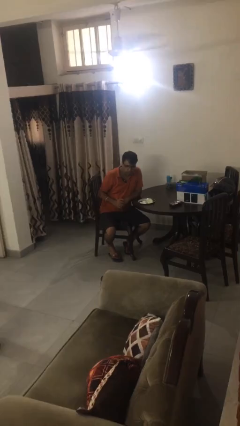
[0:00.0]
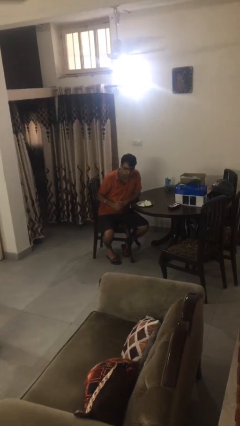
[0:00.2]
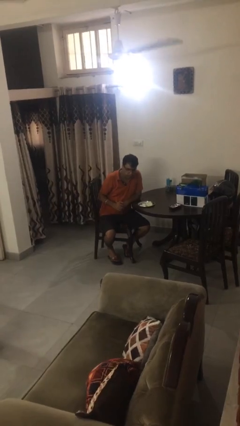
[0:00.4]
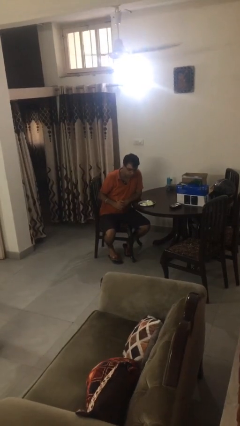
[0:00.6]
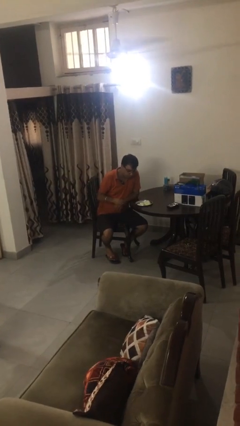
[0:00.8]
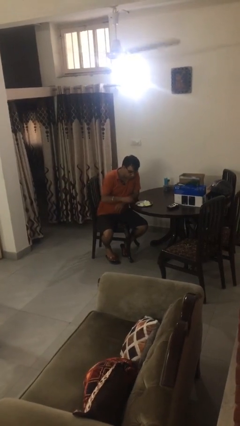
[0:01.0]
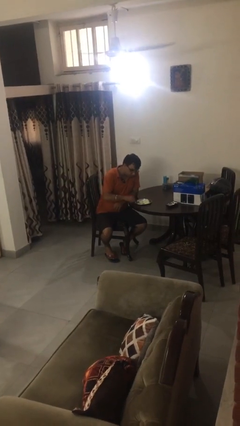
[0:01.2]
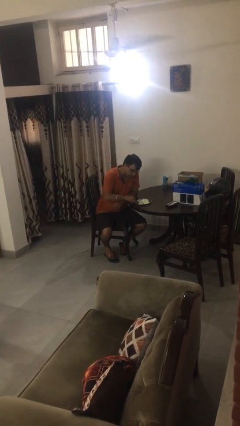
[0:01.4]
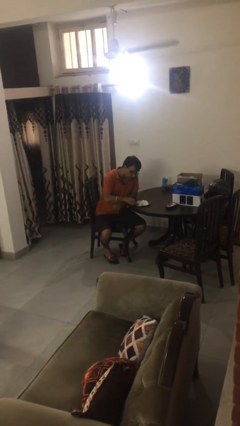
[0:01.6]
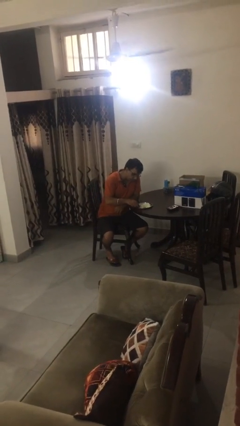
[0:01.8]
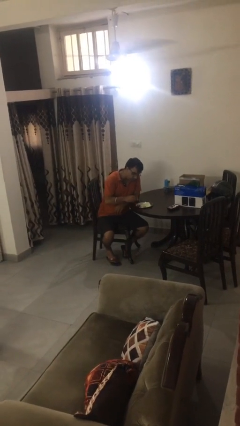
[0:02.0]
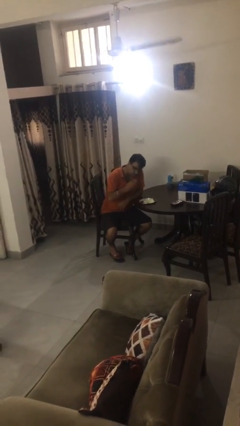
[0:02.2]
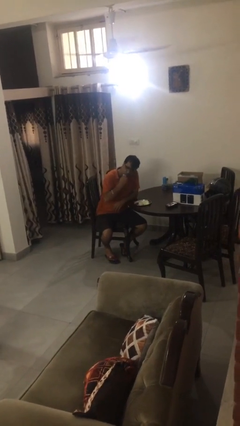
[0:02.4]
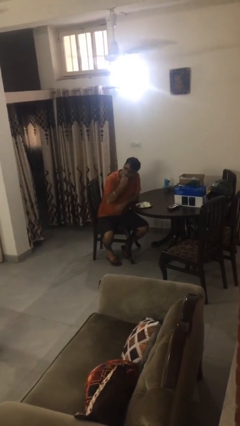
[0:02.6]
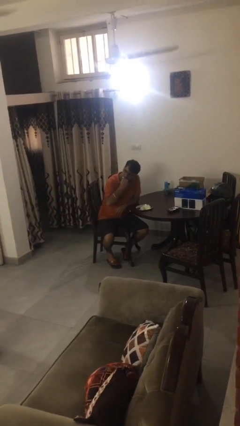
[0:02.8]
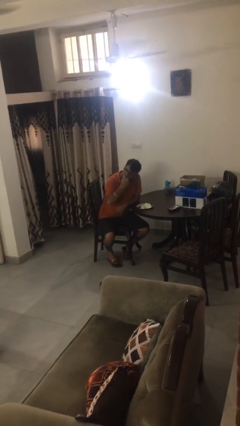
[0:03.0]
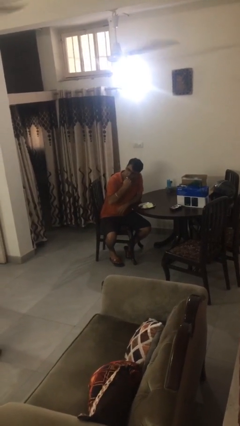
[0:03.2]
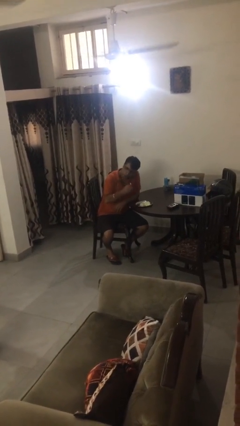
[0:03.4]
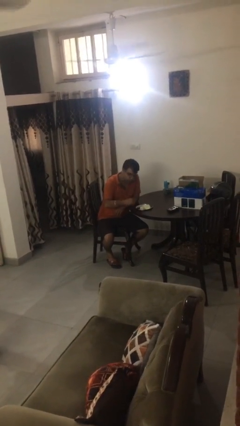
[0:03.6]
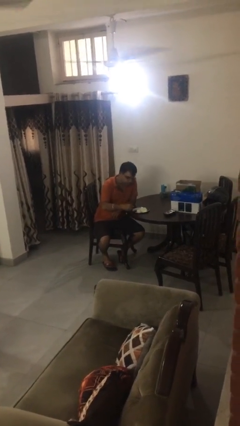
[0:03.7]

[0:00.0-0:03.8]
person eats with hands

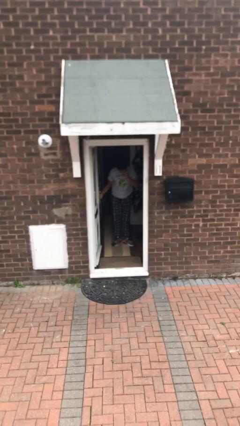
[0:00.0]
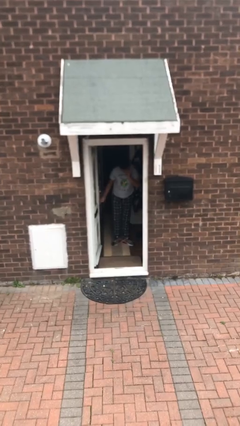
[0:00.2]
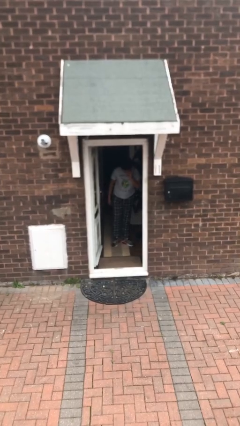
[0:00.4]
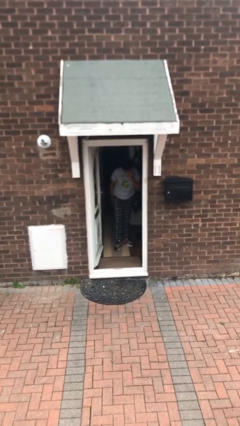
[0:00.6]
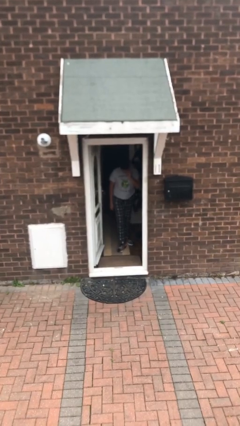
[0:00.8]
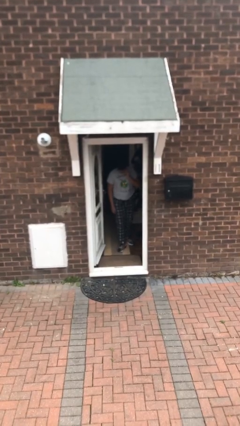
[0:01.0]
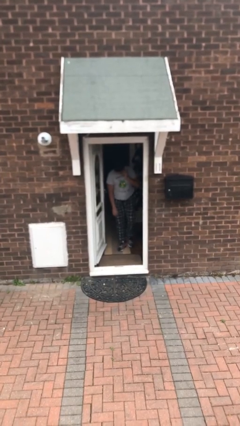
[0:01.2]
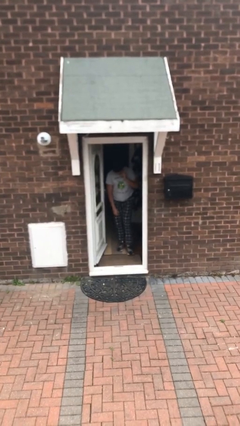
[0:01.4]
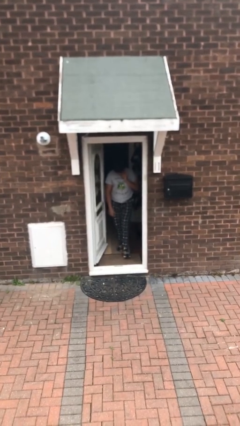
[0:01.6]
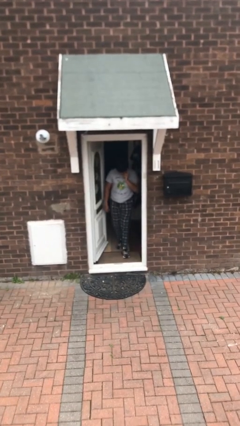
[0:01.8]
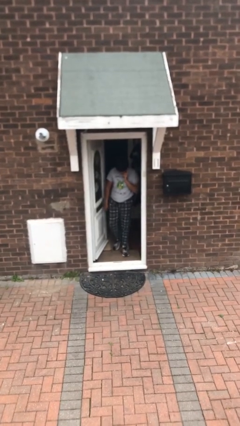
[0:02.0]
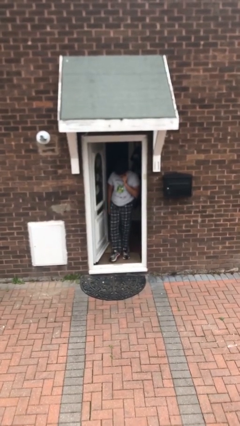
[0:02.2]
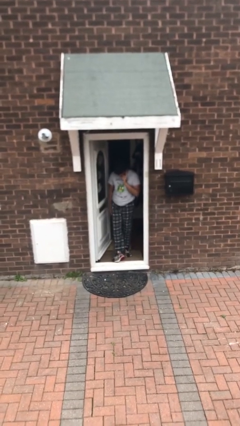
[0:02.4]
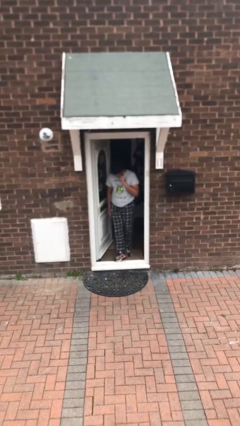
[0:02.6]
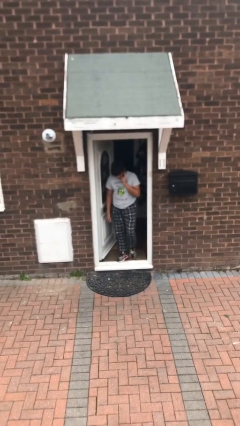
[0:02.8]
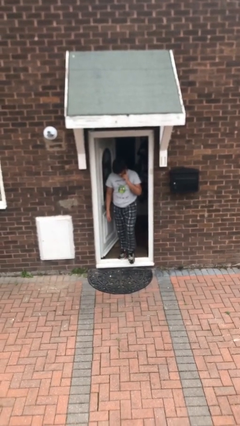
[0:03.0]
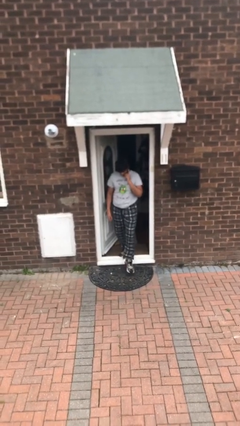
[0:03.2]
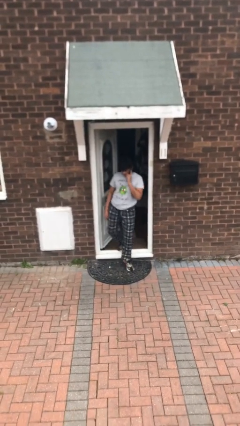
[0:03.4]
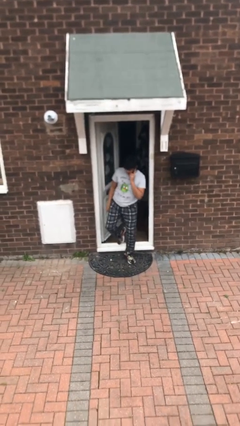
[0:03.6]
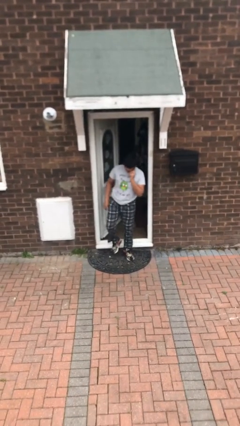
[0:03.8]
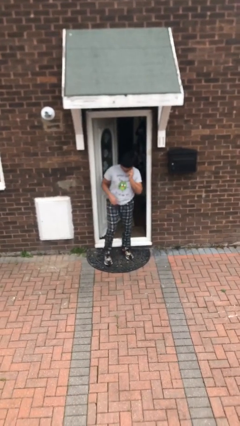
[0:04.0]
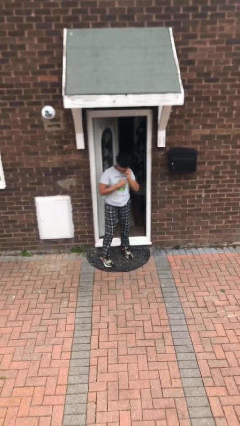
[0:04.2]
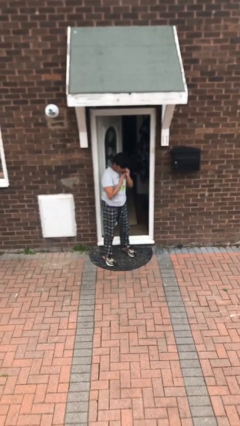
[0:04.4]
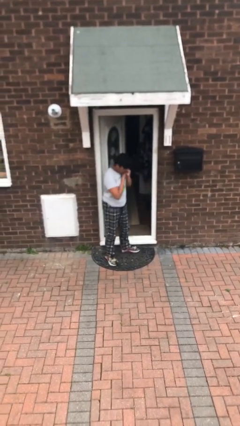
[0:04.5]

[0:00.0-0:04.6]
person enters scene through structure

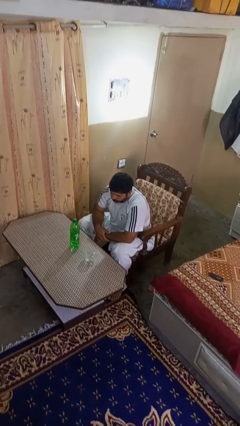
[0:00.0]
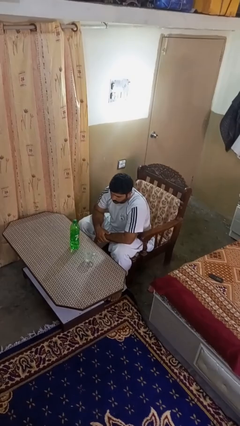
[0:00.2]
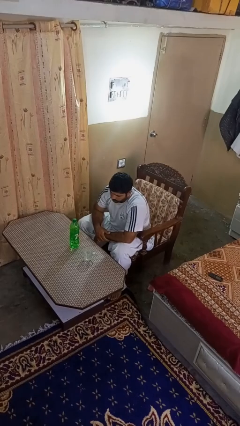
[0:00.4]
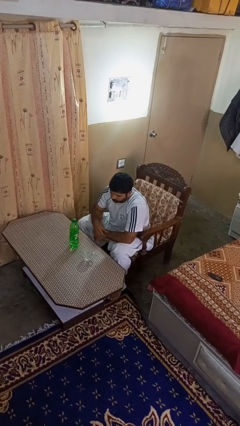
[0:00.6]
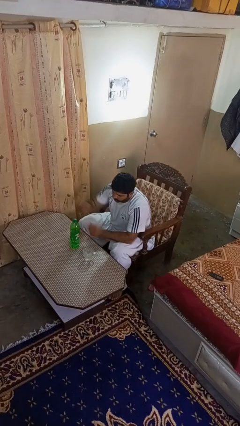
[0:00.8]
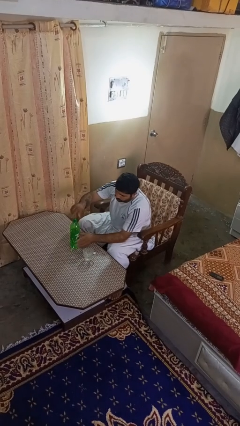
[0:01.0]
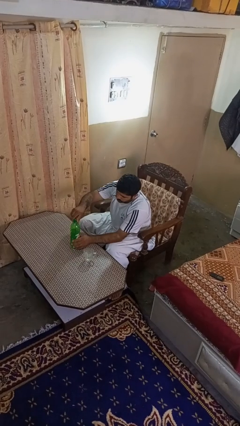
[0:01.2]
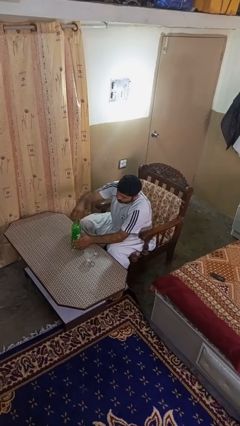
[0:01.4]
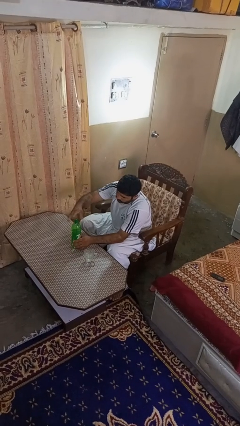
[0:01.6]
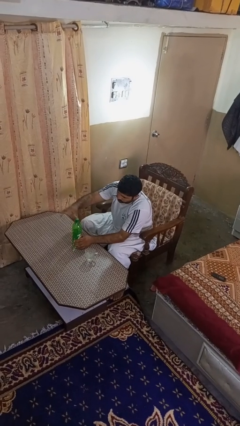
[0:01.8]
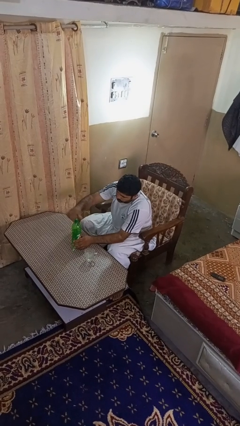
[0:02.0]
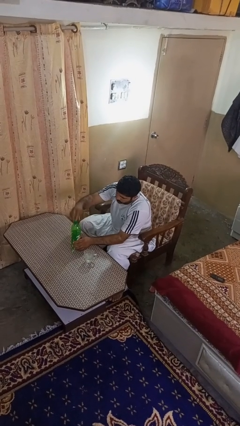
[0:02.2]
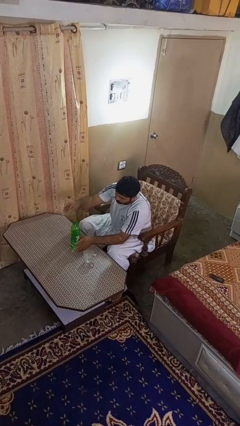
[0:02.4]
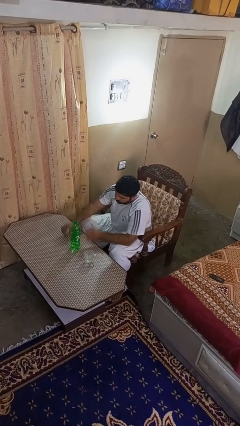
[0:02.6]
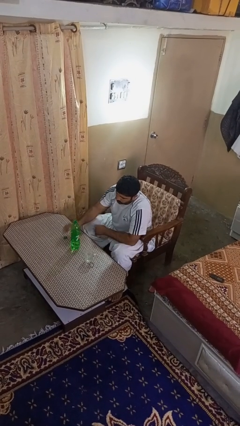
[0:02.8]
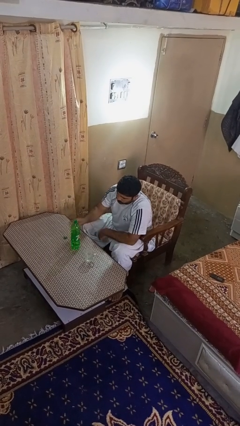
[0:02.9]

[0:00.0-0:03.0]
person unscrews lid from bottle

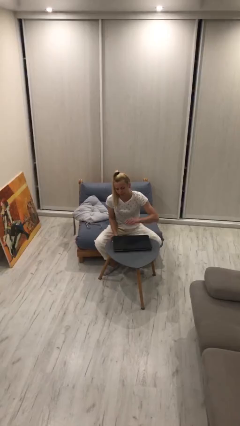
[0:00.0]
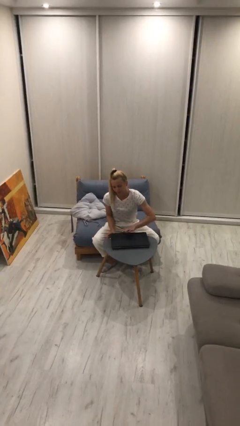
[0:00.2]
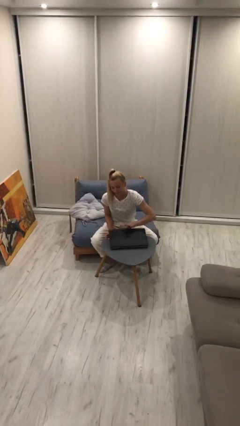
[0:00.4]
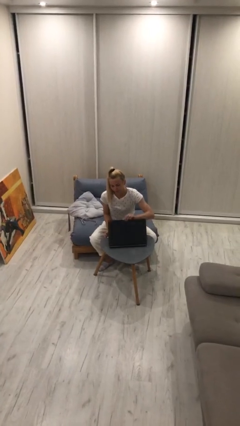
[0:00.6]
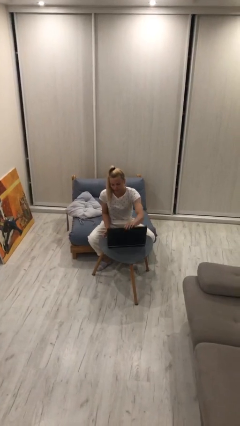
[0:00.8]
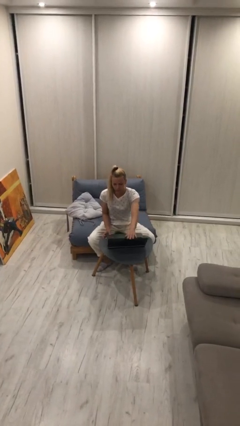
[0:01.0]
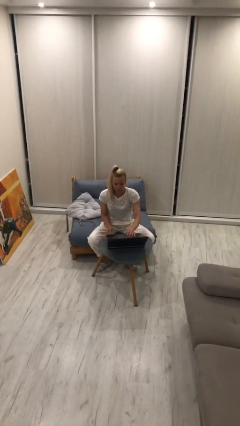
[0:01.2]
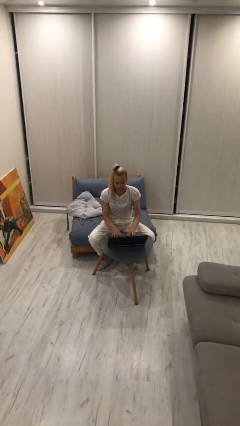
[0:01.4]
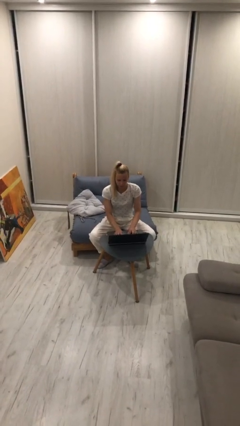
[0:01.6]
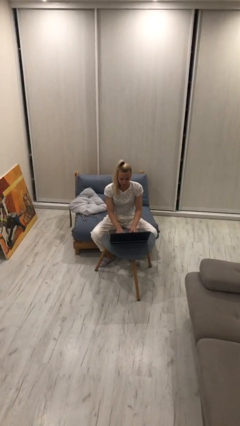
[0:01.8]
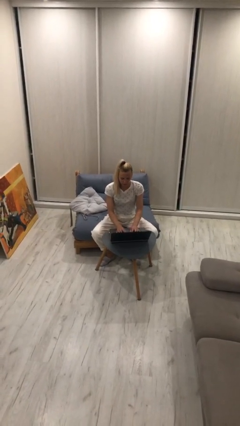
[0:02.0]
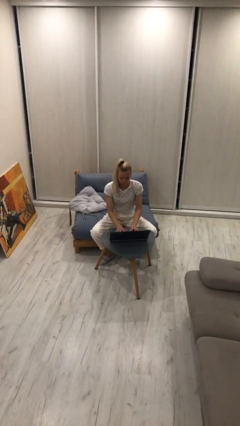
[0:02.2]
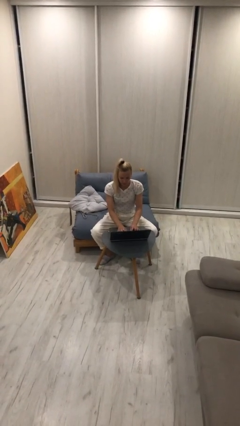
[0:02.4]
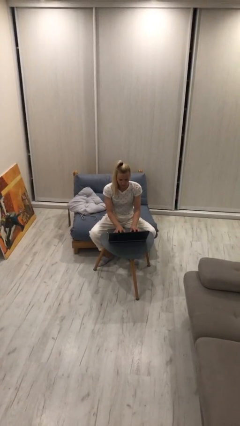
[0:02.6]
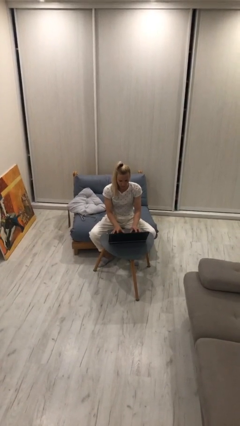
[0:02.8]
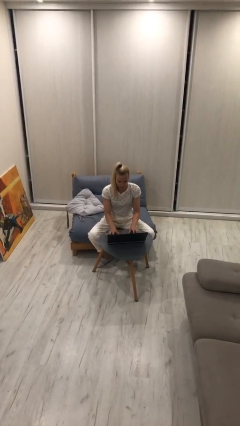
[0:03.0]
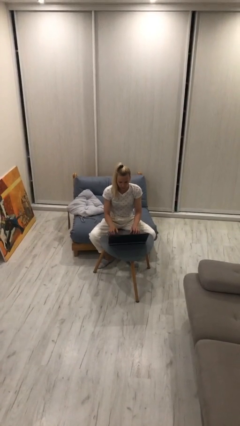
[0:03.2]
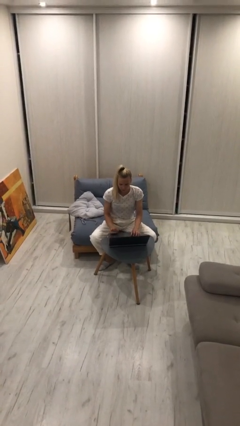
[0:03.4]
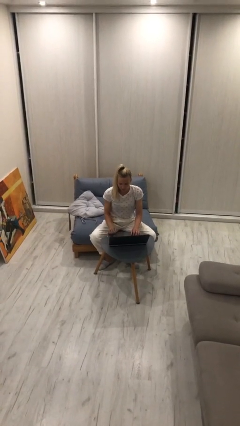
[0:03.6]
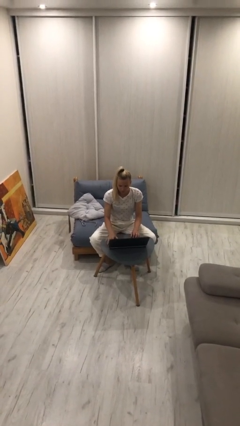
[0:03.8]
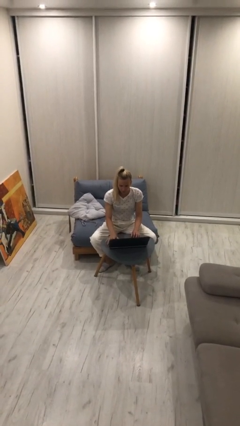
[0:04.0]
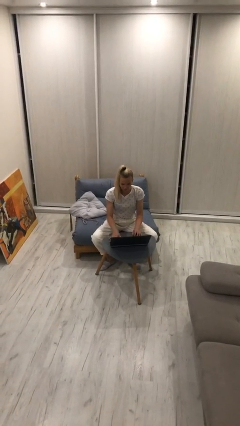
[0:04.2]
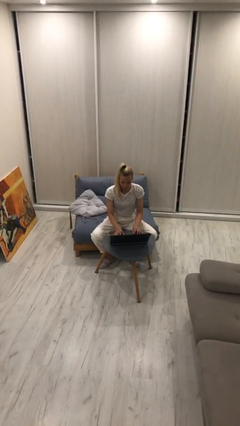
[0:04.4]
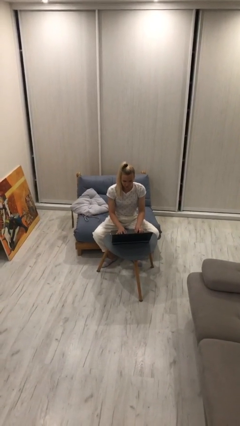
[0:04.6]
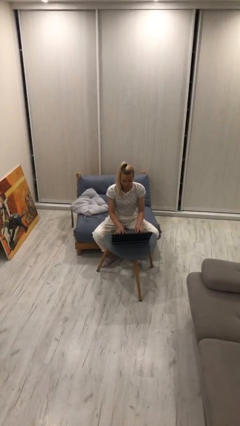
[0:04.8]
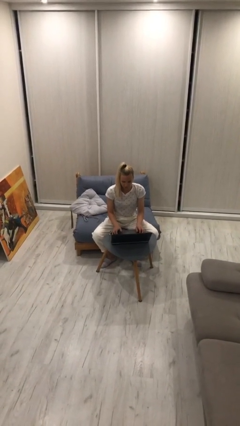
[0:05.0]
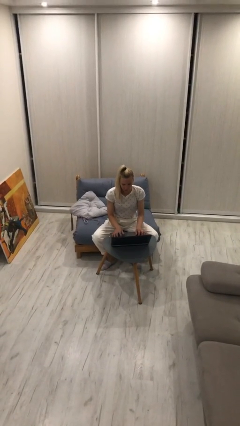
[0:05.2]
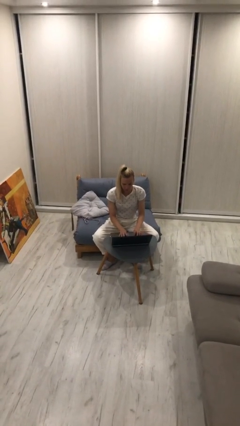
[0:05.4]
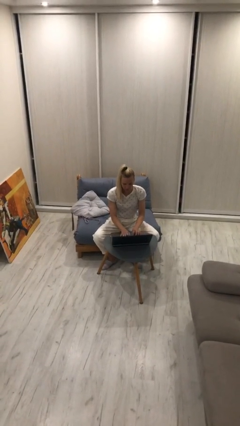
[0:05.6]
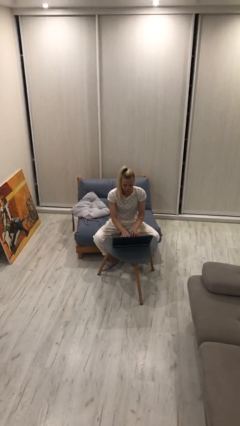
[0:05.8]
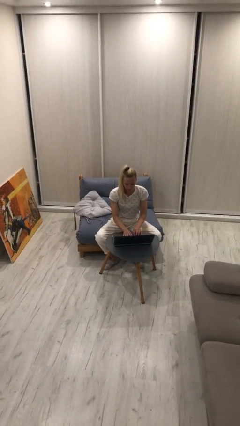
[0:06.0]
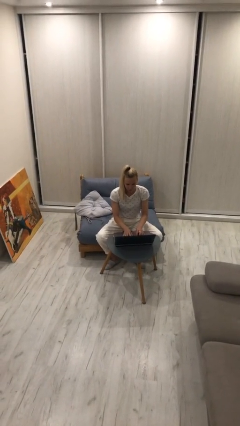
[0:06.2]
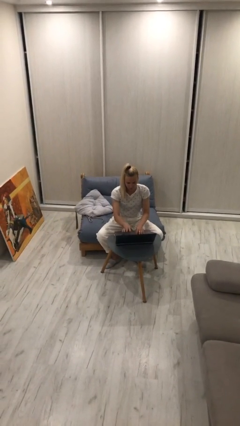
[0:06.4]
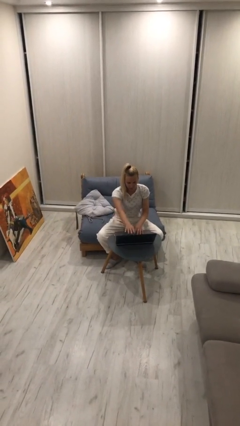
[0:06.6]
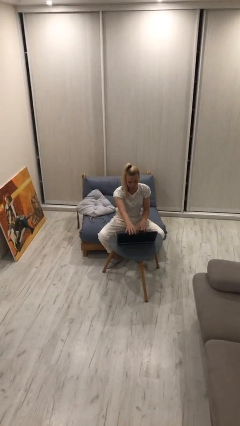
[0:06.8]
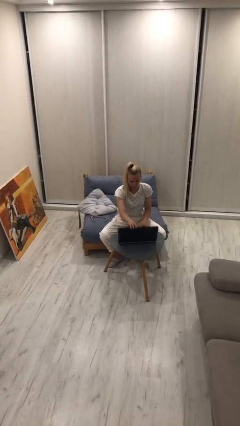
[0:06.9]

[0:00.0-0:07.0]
person interacts with laptop
